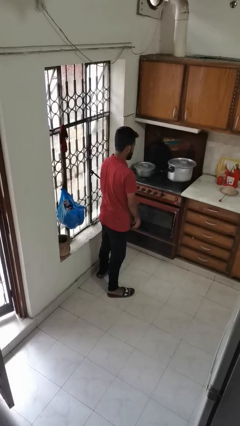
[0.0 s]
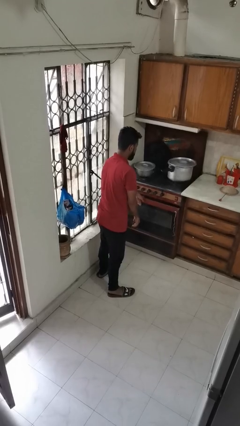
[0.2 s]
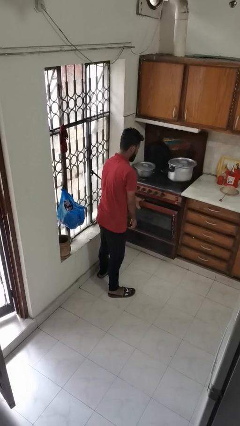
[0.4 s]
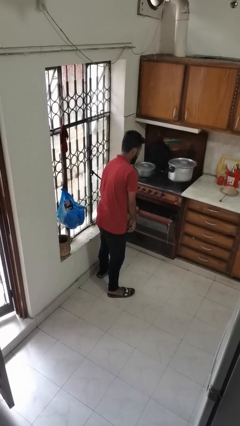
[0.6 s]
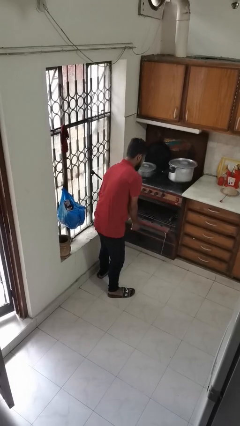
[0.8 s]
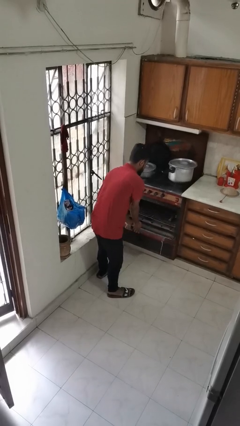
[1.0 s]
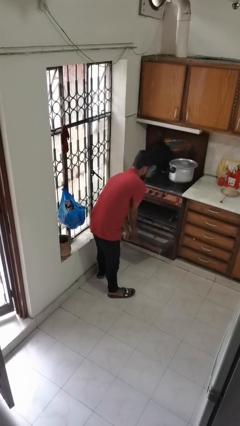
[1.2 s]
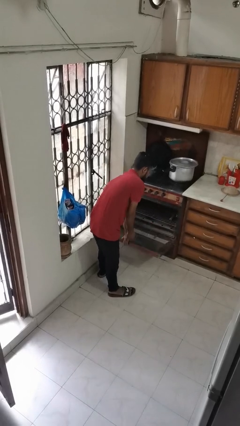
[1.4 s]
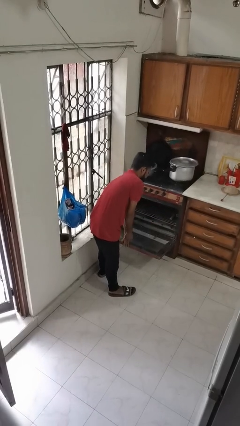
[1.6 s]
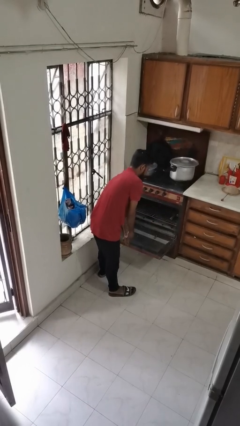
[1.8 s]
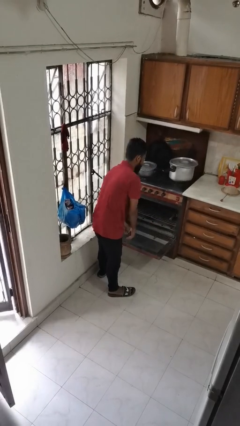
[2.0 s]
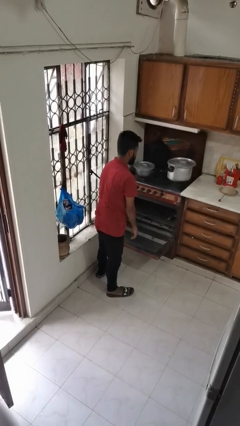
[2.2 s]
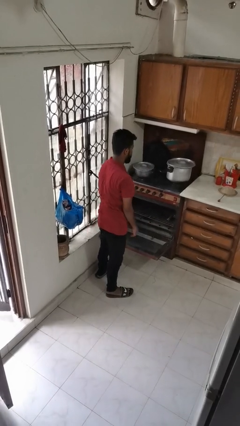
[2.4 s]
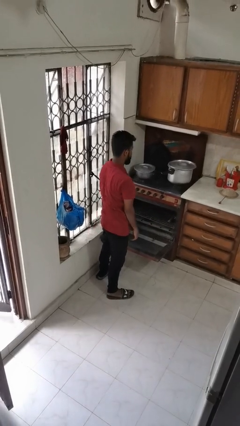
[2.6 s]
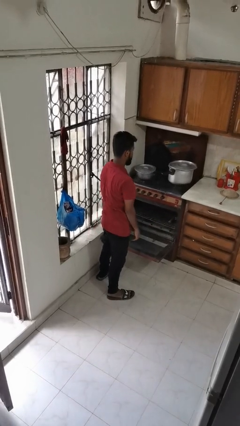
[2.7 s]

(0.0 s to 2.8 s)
person opens oven door

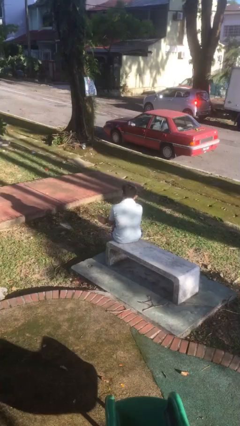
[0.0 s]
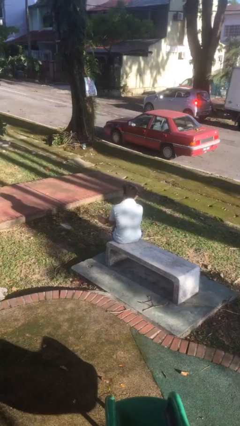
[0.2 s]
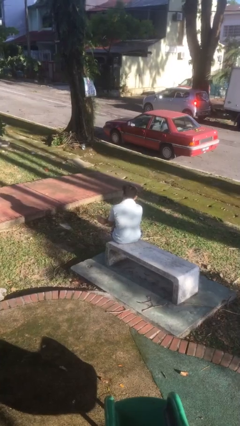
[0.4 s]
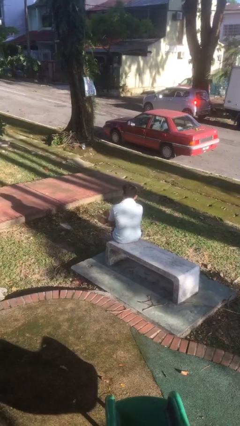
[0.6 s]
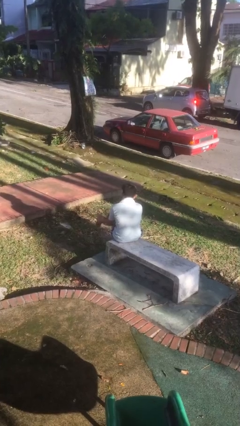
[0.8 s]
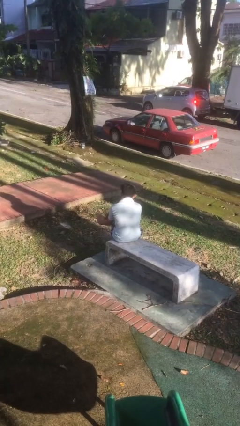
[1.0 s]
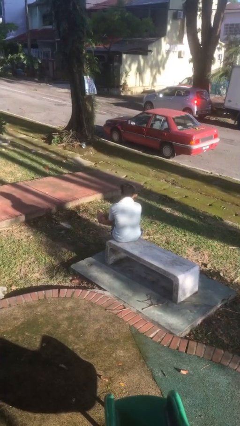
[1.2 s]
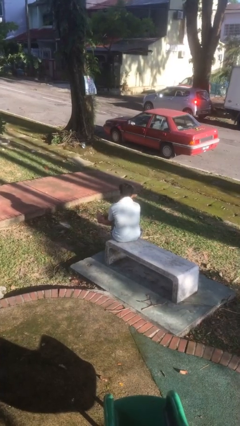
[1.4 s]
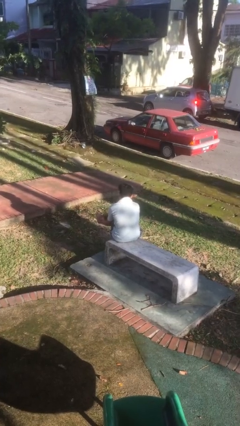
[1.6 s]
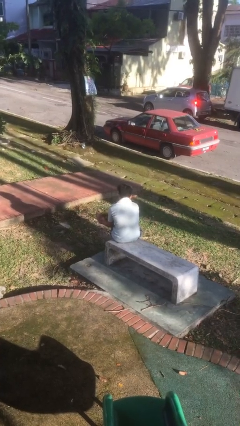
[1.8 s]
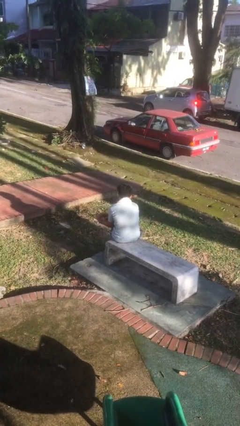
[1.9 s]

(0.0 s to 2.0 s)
person rubs foot

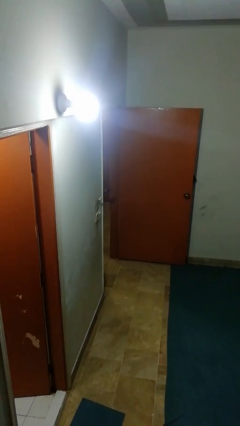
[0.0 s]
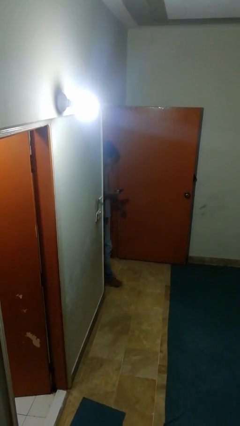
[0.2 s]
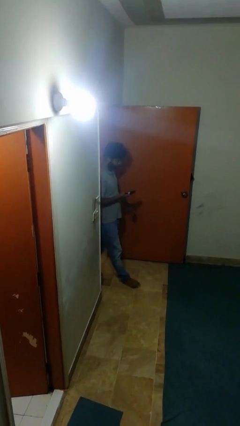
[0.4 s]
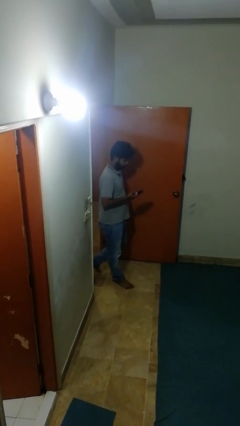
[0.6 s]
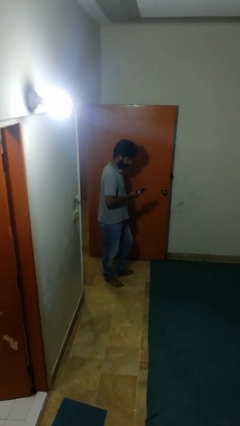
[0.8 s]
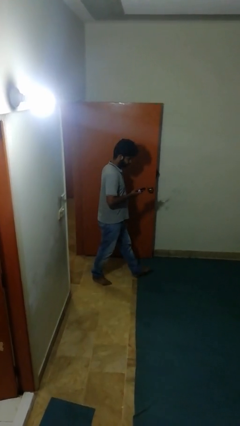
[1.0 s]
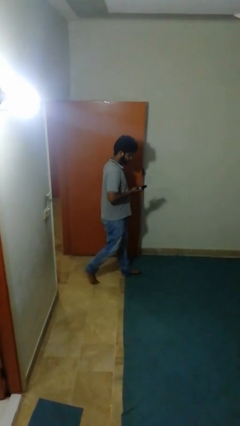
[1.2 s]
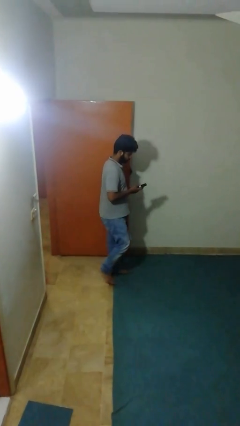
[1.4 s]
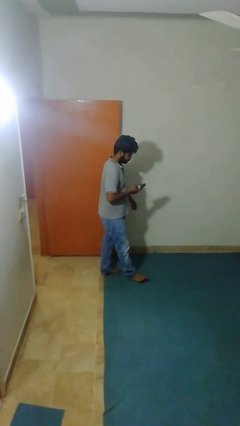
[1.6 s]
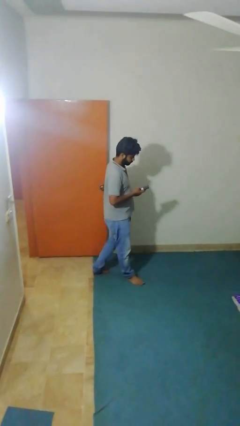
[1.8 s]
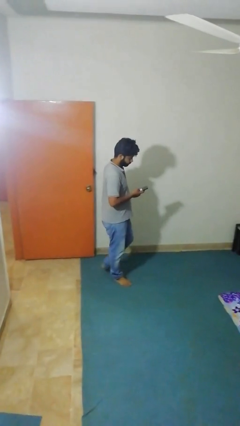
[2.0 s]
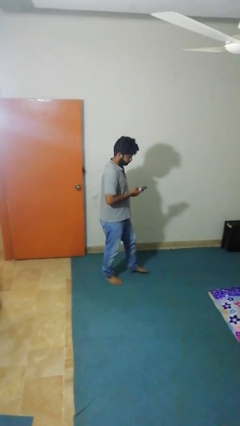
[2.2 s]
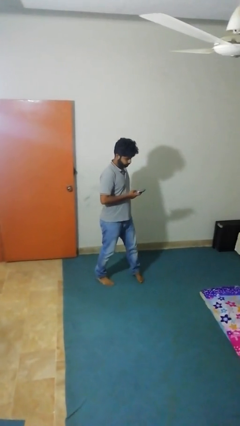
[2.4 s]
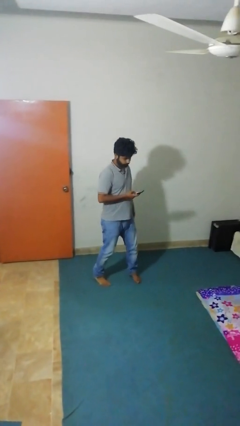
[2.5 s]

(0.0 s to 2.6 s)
person enters scene through structure

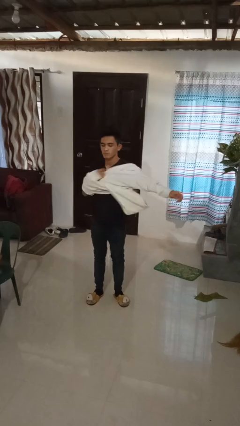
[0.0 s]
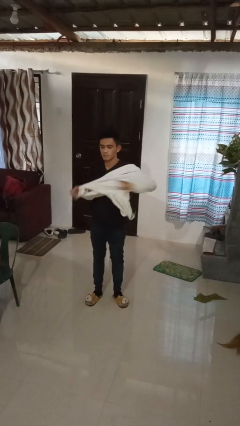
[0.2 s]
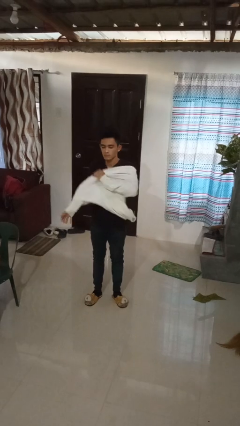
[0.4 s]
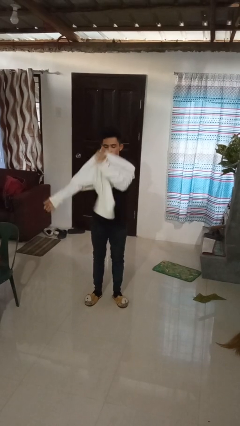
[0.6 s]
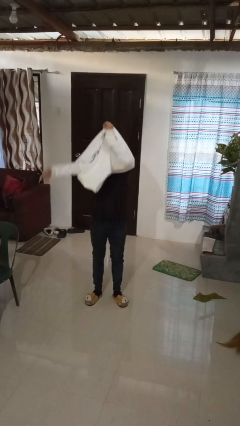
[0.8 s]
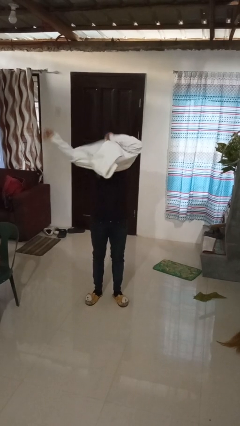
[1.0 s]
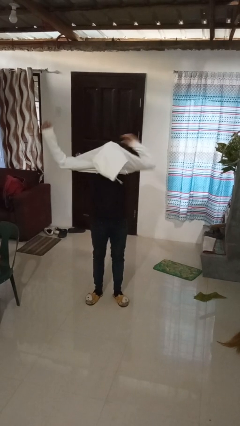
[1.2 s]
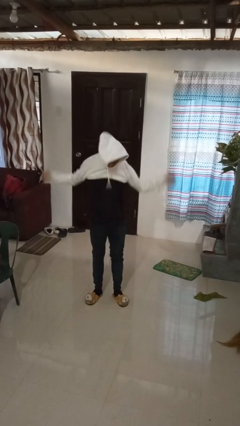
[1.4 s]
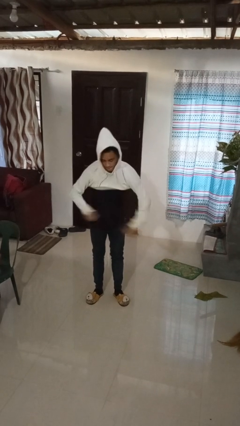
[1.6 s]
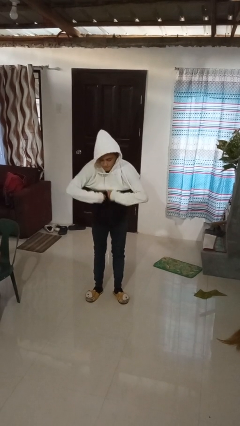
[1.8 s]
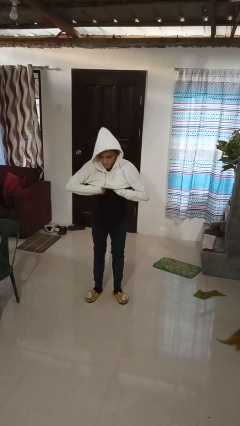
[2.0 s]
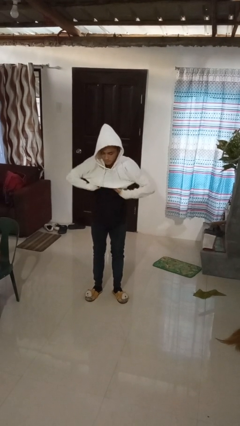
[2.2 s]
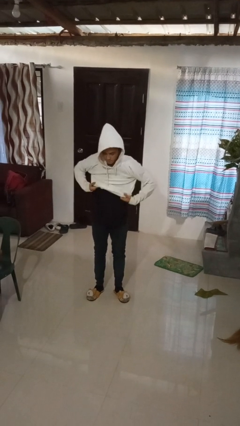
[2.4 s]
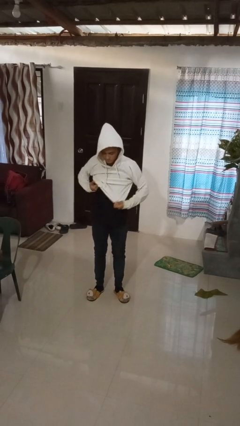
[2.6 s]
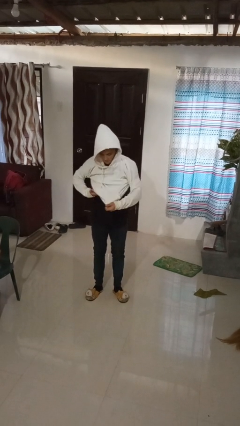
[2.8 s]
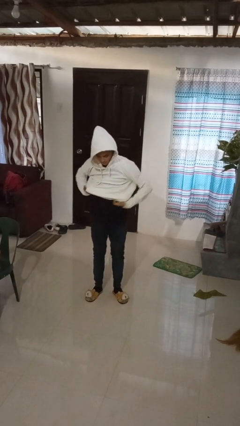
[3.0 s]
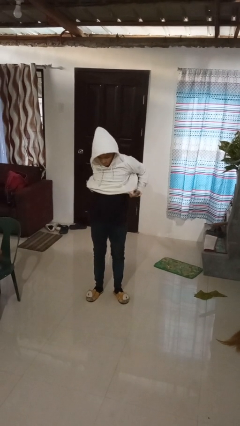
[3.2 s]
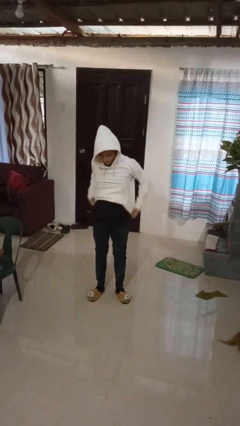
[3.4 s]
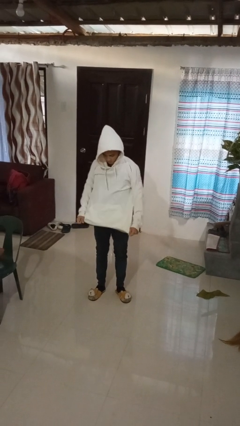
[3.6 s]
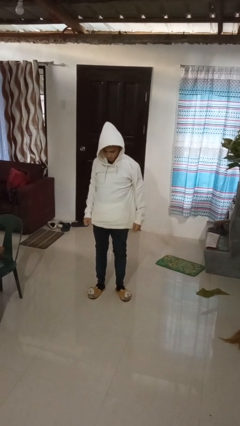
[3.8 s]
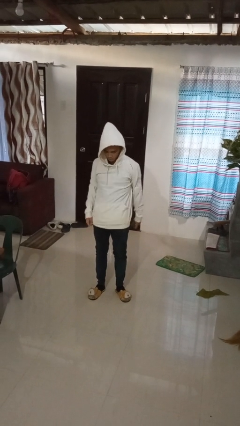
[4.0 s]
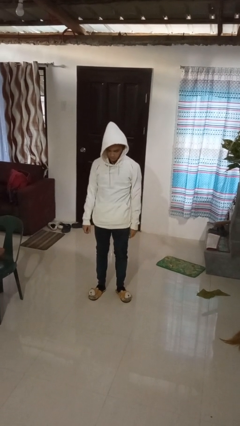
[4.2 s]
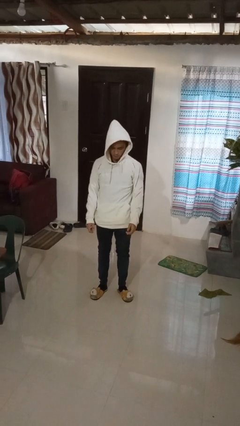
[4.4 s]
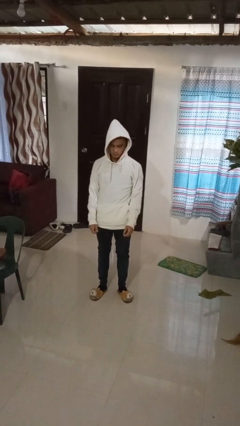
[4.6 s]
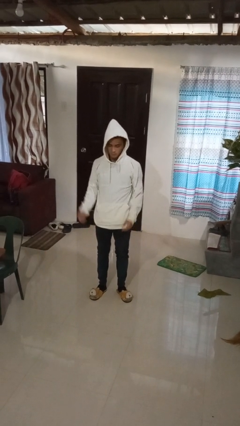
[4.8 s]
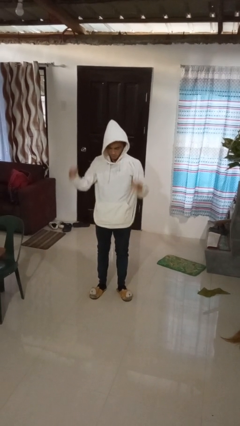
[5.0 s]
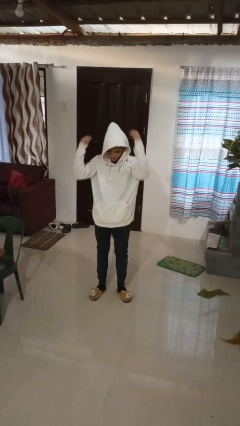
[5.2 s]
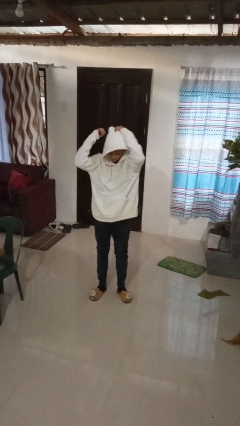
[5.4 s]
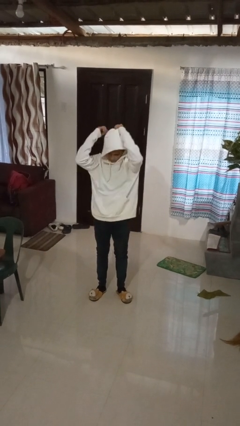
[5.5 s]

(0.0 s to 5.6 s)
person puts on hoodie

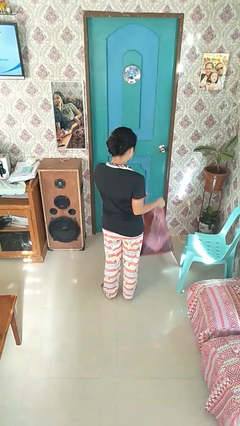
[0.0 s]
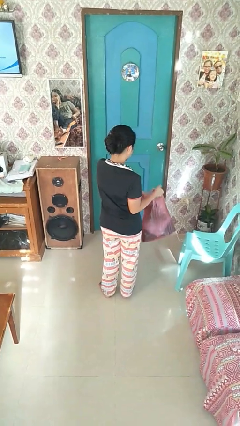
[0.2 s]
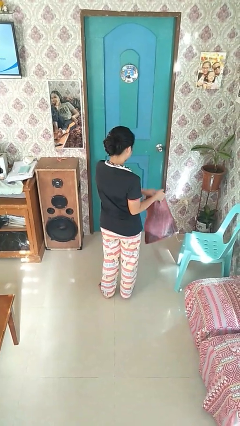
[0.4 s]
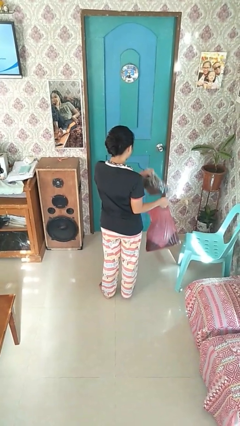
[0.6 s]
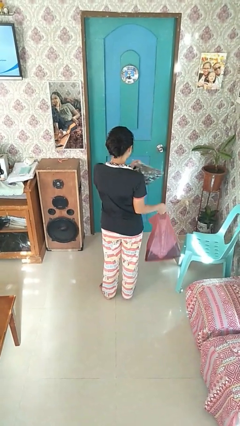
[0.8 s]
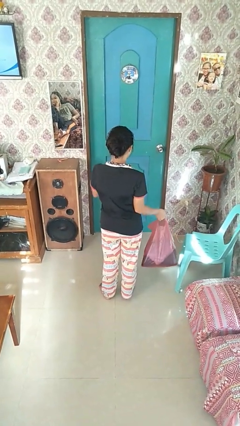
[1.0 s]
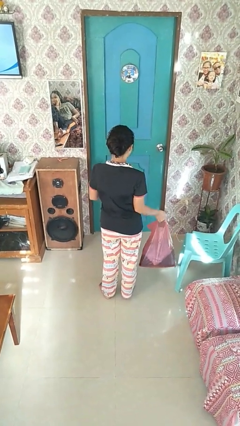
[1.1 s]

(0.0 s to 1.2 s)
person takes object from bag

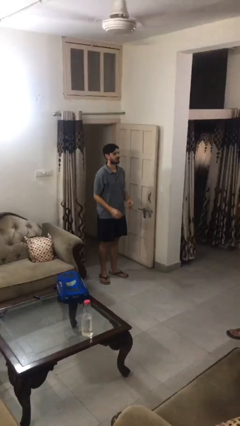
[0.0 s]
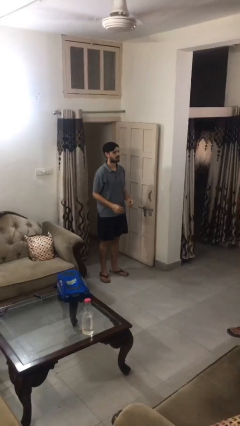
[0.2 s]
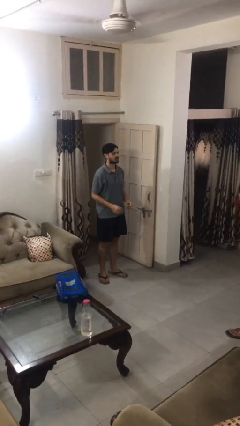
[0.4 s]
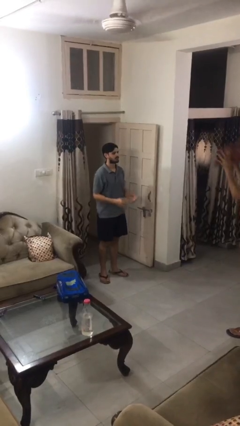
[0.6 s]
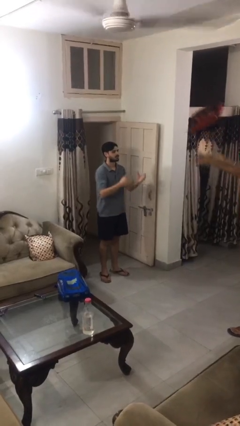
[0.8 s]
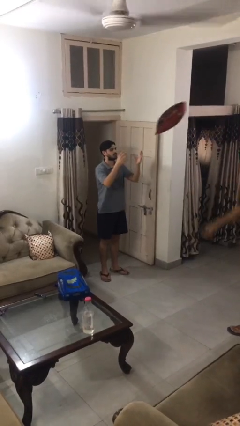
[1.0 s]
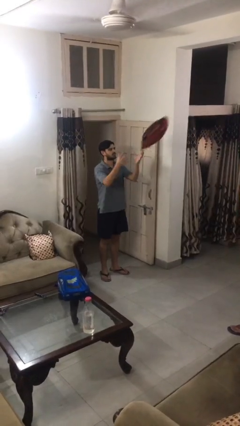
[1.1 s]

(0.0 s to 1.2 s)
person catches object from person

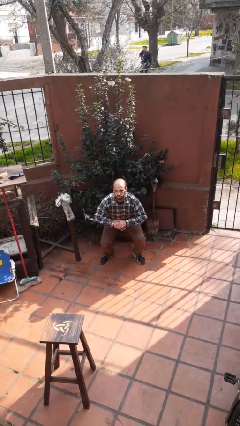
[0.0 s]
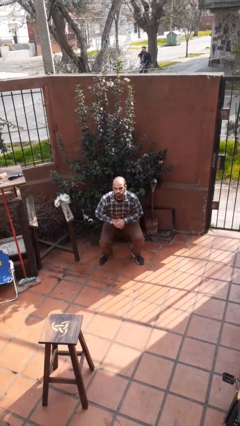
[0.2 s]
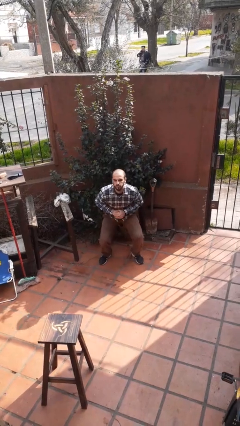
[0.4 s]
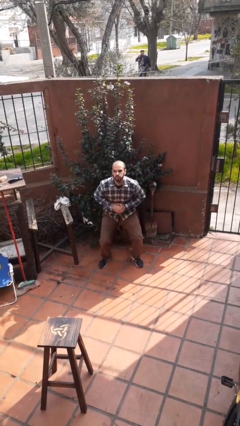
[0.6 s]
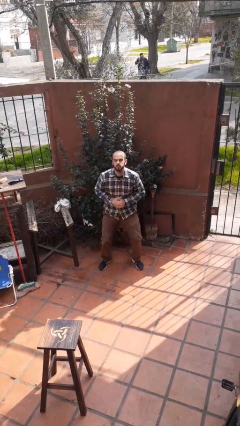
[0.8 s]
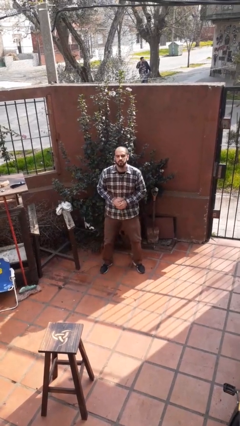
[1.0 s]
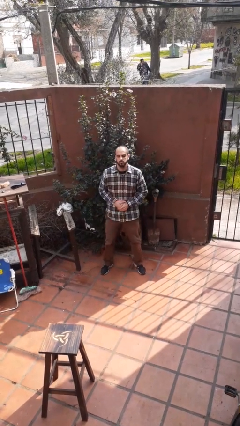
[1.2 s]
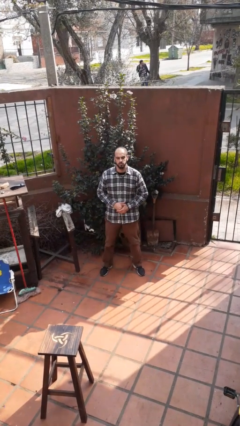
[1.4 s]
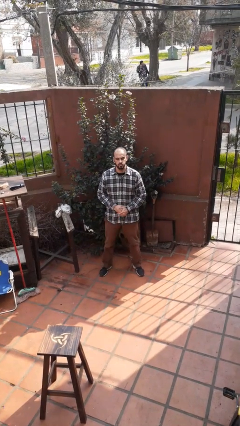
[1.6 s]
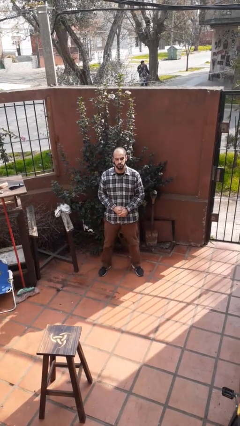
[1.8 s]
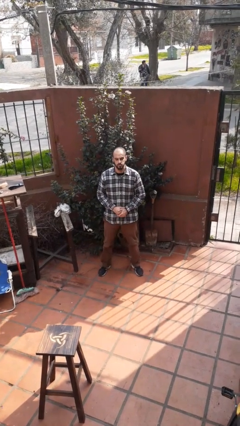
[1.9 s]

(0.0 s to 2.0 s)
person stands up
